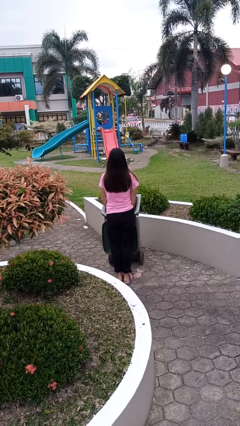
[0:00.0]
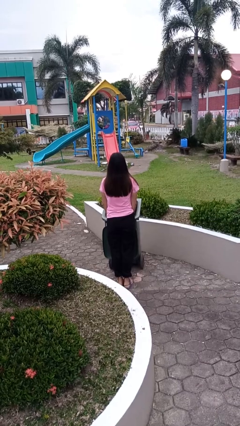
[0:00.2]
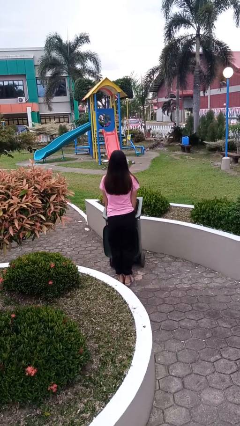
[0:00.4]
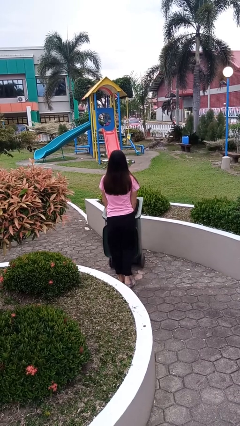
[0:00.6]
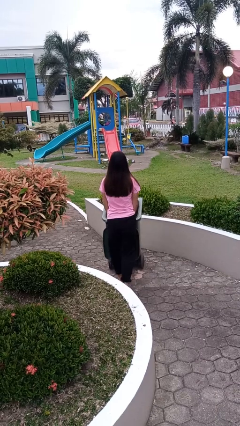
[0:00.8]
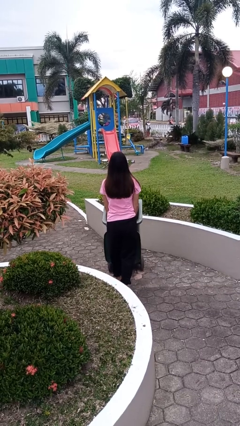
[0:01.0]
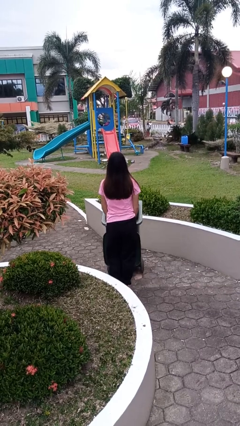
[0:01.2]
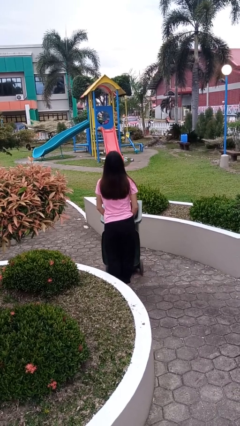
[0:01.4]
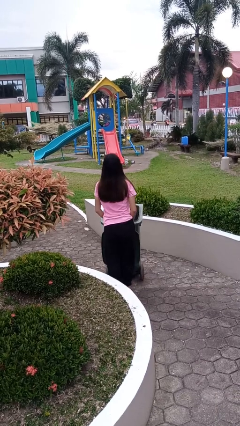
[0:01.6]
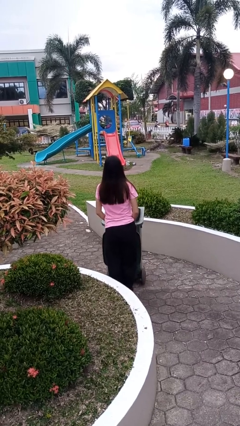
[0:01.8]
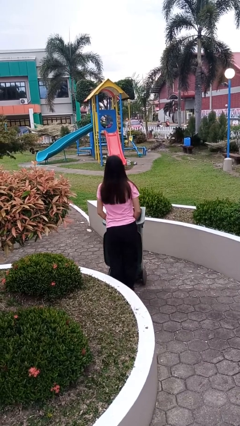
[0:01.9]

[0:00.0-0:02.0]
person pulls wheeled trashcan

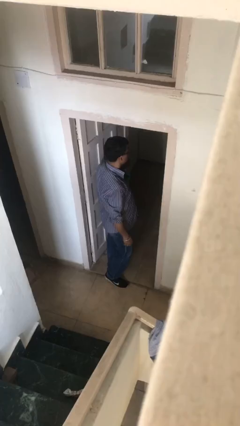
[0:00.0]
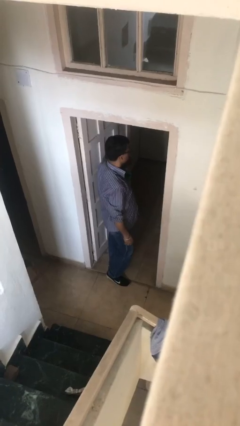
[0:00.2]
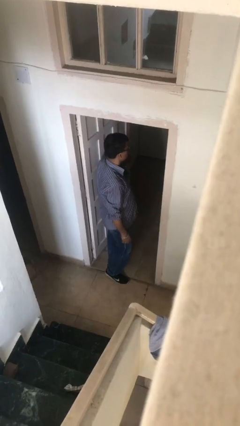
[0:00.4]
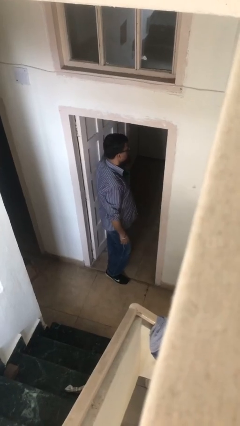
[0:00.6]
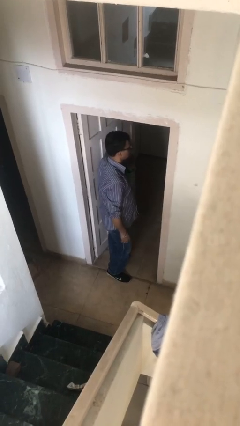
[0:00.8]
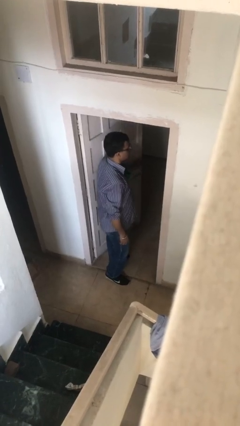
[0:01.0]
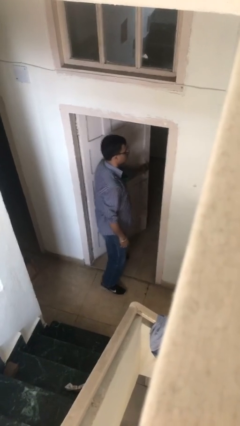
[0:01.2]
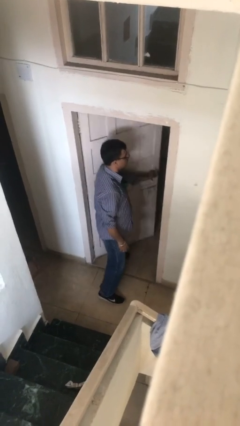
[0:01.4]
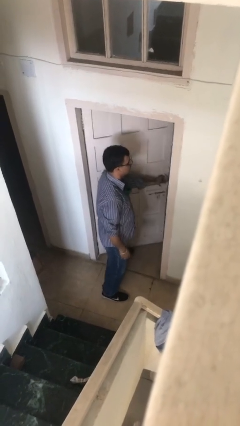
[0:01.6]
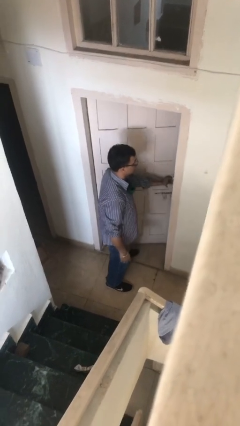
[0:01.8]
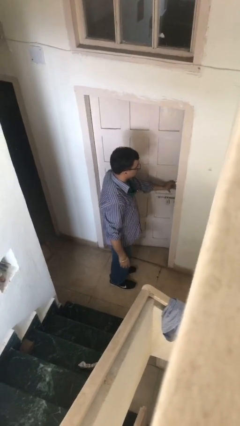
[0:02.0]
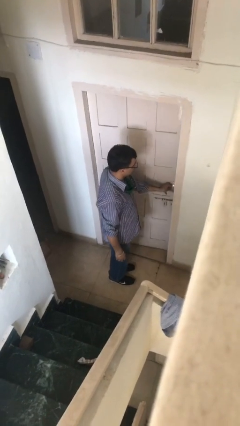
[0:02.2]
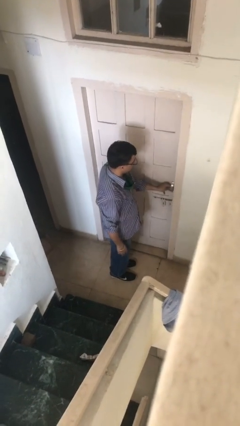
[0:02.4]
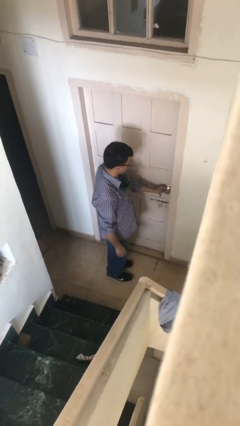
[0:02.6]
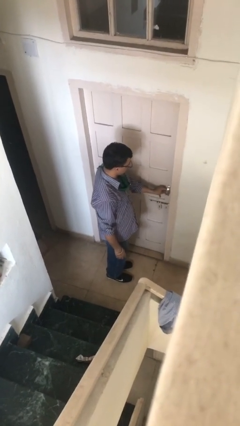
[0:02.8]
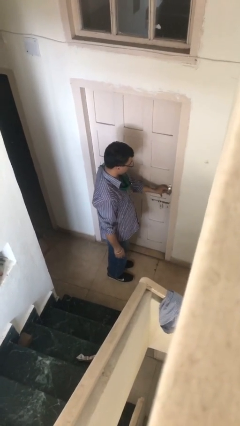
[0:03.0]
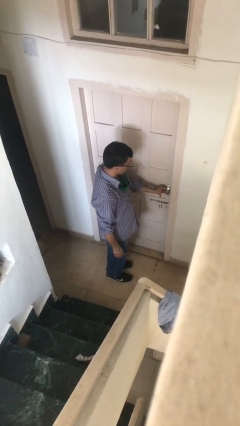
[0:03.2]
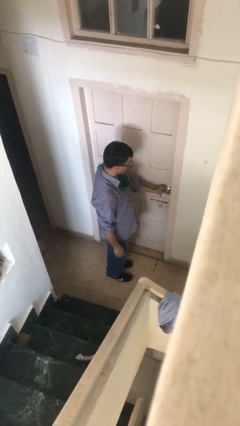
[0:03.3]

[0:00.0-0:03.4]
person closes facility door

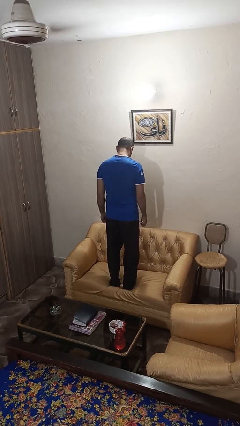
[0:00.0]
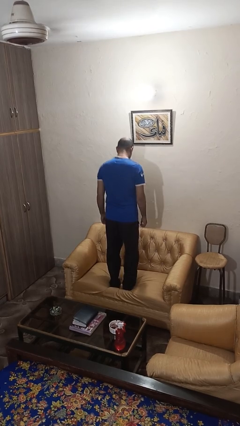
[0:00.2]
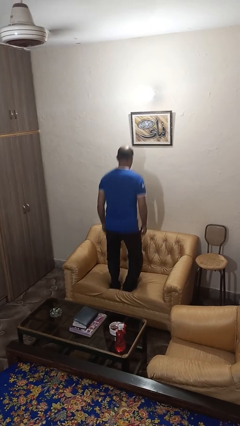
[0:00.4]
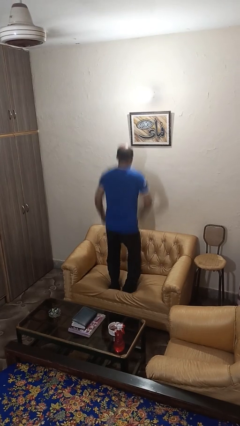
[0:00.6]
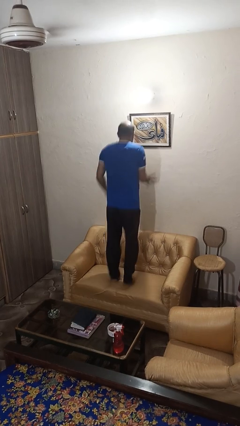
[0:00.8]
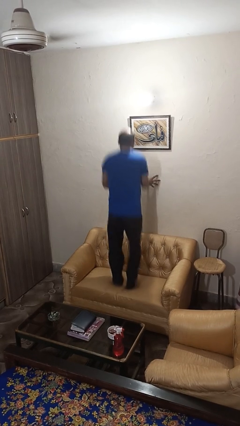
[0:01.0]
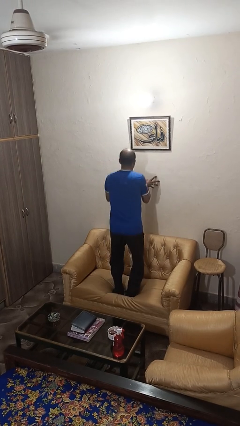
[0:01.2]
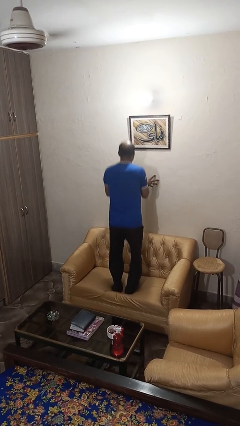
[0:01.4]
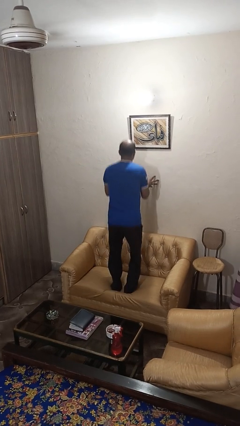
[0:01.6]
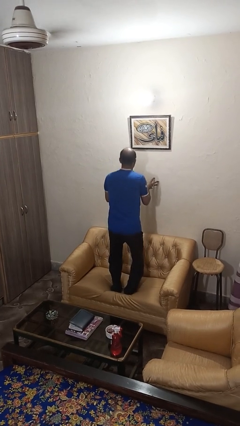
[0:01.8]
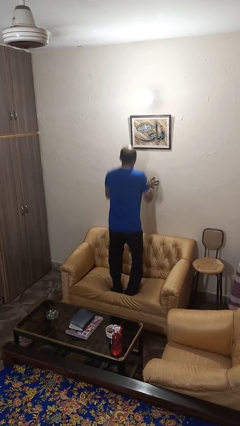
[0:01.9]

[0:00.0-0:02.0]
person jumps on couch

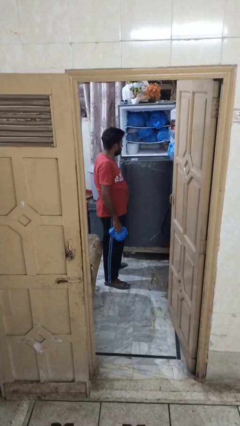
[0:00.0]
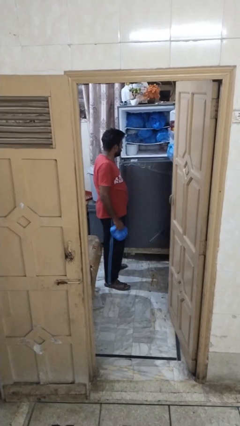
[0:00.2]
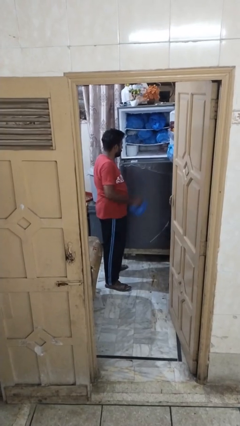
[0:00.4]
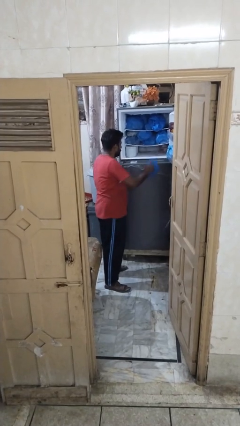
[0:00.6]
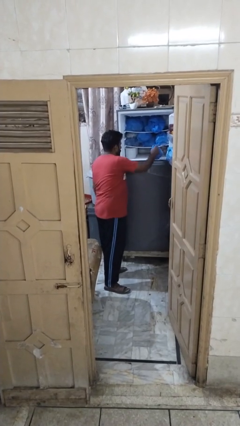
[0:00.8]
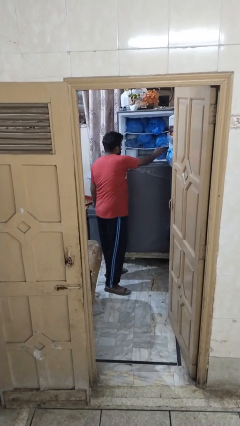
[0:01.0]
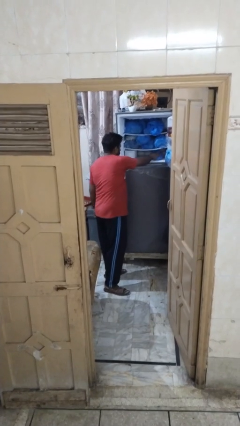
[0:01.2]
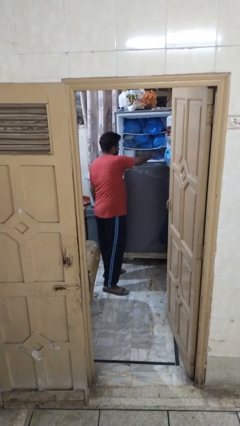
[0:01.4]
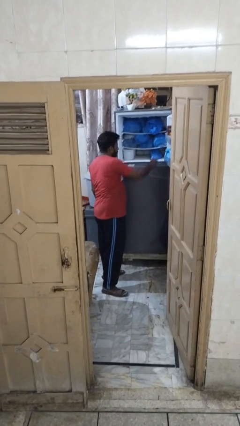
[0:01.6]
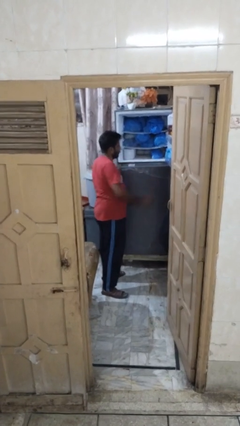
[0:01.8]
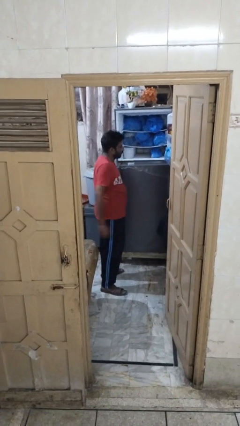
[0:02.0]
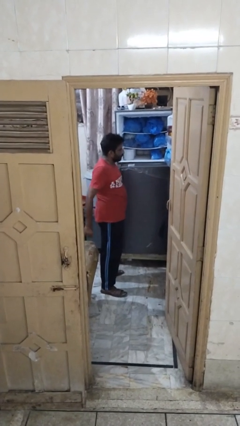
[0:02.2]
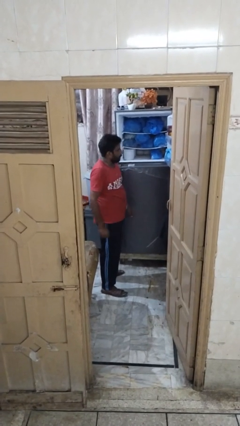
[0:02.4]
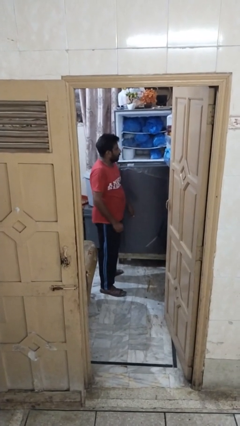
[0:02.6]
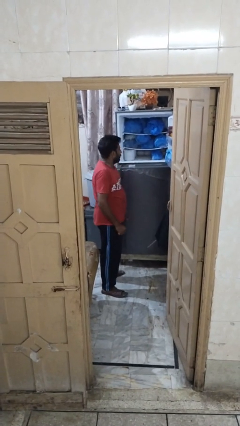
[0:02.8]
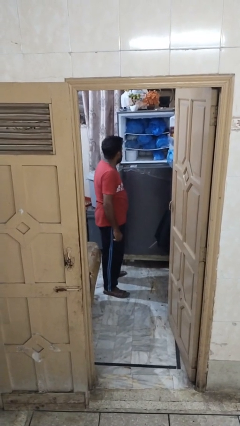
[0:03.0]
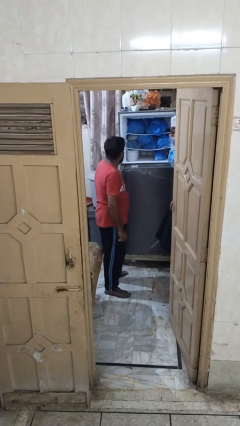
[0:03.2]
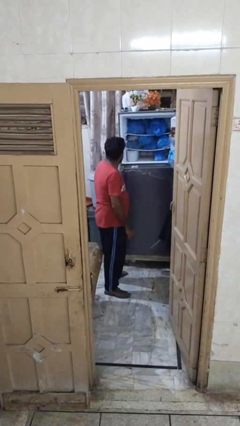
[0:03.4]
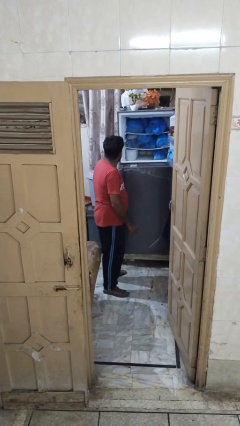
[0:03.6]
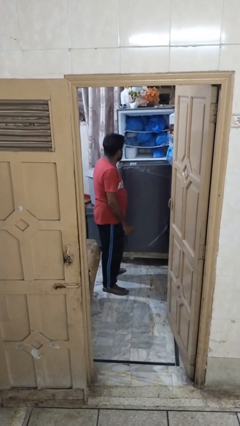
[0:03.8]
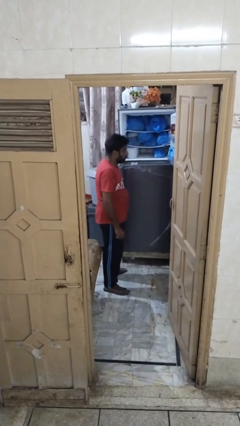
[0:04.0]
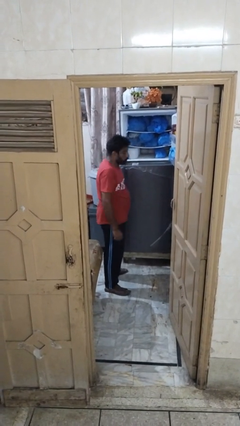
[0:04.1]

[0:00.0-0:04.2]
person loads groceries into refrigerator

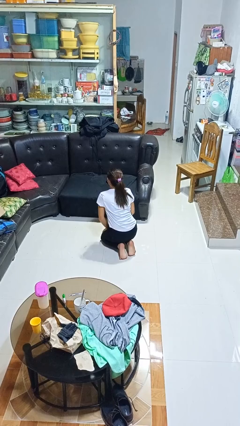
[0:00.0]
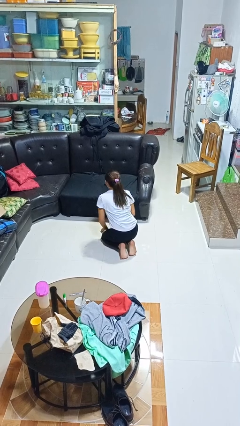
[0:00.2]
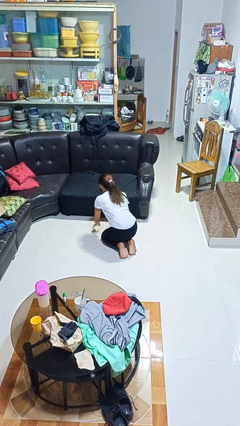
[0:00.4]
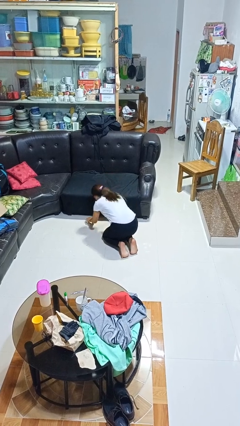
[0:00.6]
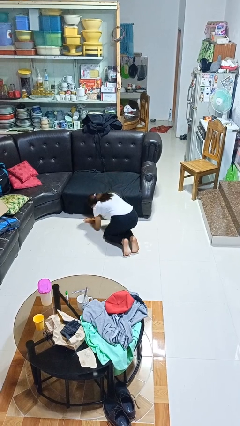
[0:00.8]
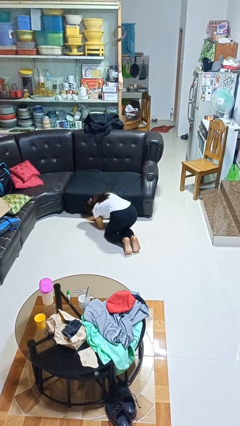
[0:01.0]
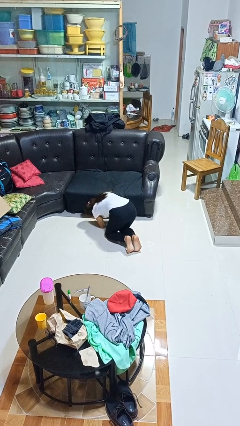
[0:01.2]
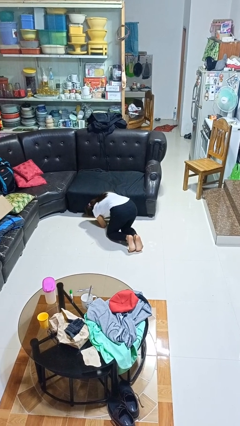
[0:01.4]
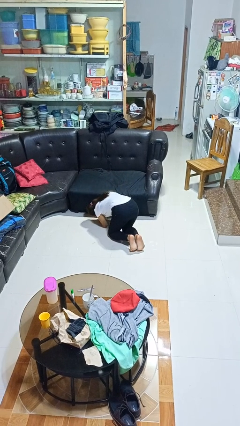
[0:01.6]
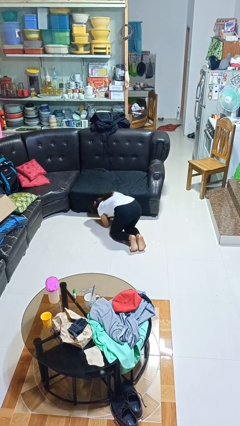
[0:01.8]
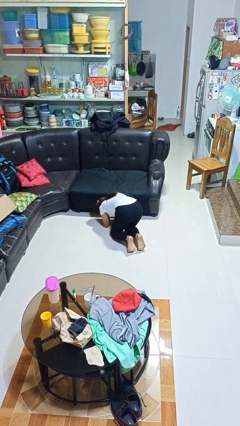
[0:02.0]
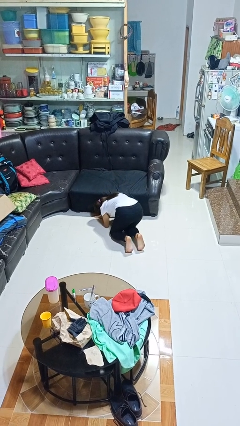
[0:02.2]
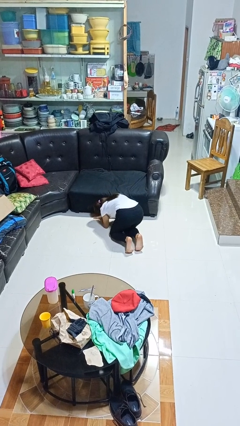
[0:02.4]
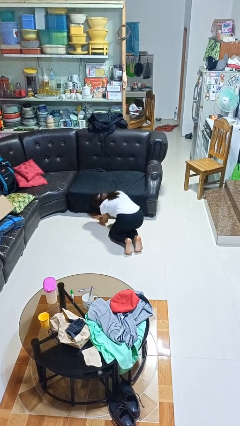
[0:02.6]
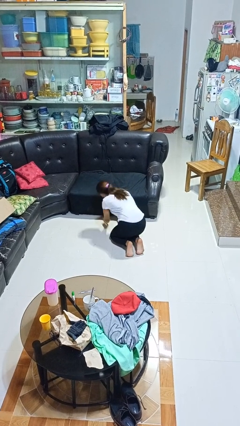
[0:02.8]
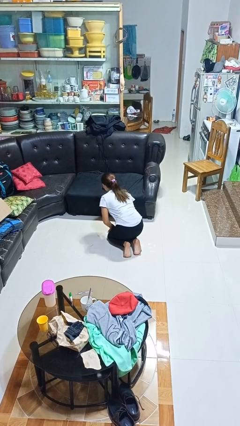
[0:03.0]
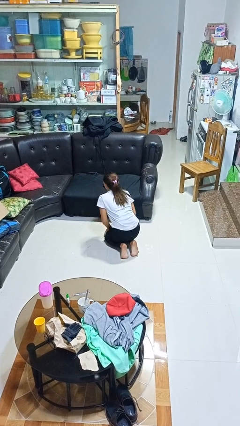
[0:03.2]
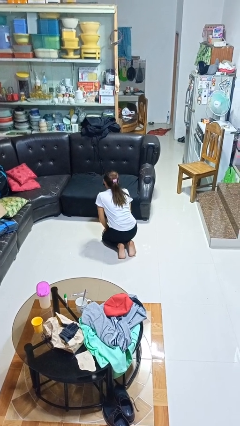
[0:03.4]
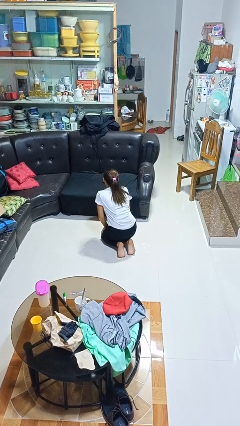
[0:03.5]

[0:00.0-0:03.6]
person searches under couch

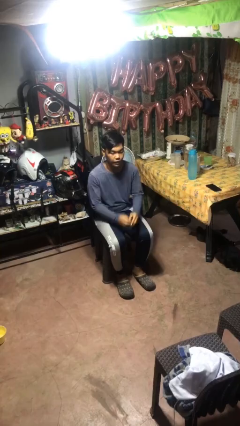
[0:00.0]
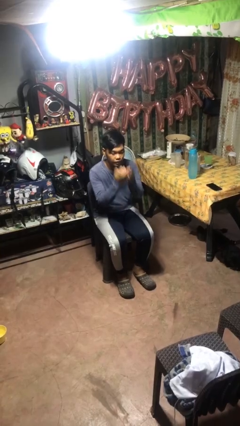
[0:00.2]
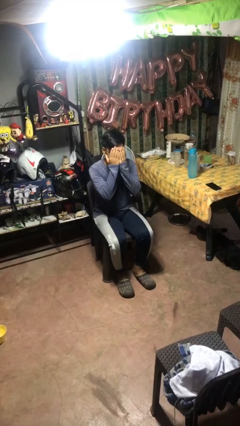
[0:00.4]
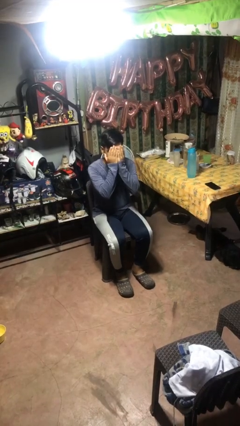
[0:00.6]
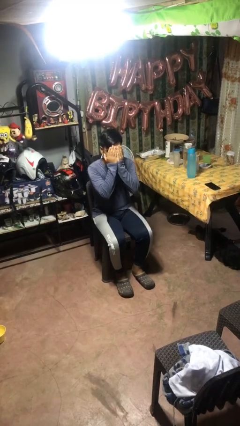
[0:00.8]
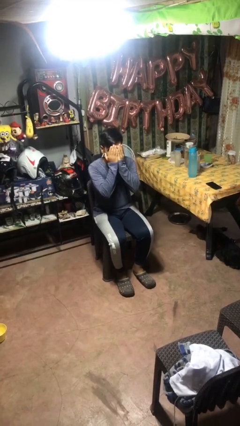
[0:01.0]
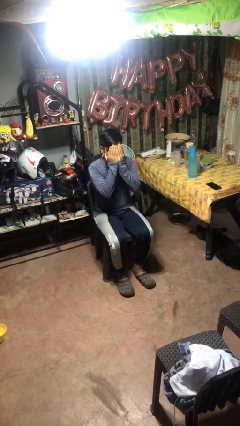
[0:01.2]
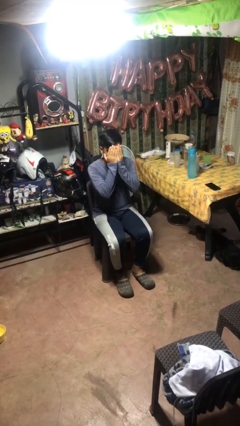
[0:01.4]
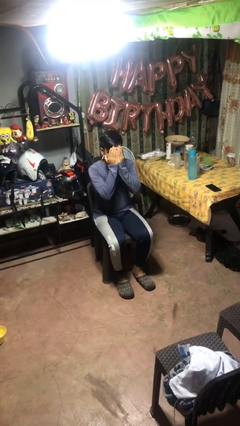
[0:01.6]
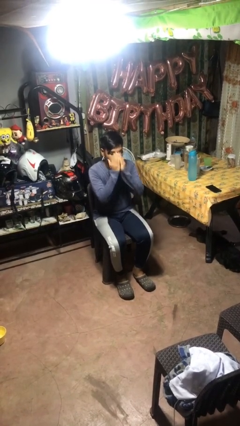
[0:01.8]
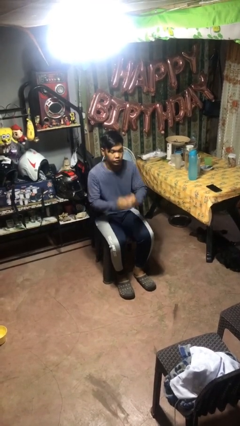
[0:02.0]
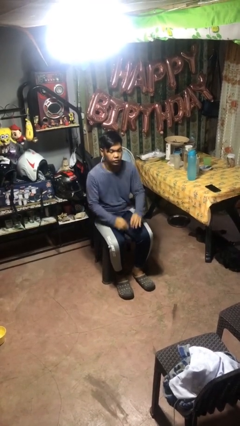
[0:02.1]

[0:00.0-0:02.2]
person covers face with hands
